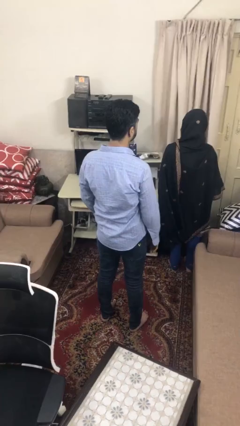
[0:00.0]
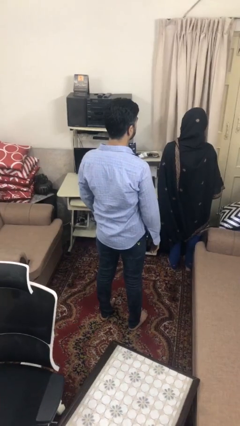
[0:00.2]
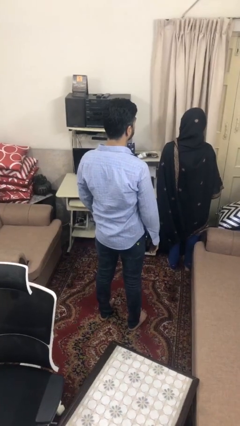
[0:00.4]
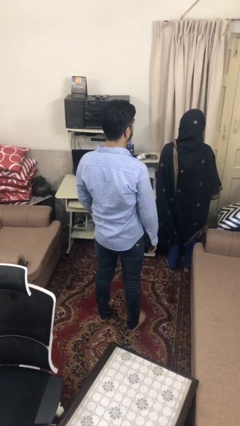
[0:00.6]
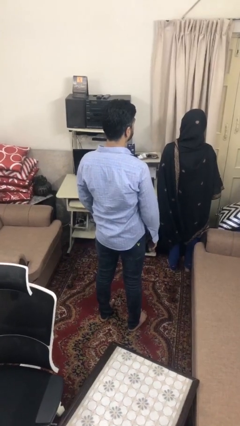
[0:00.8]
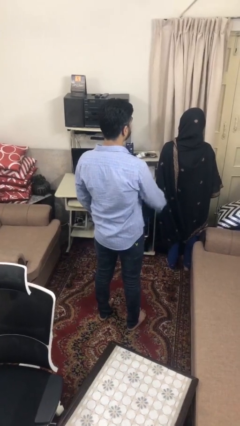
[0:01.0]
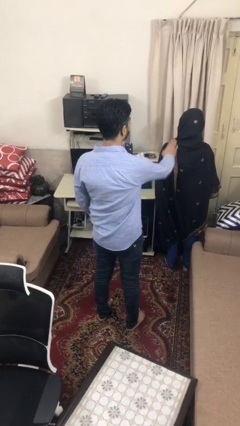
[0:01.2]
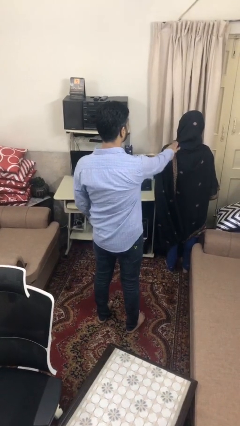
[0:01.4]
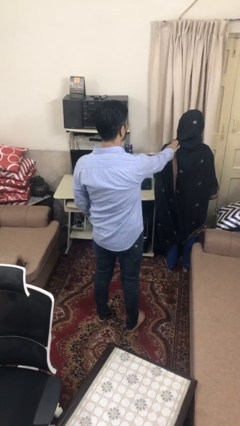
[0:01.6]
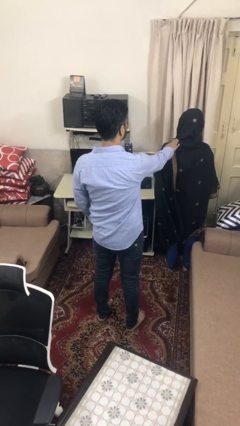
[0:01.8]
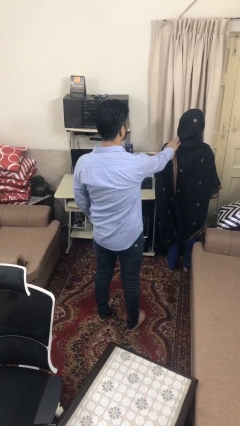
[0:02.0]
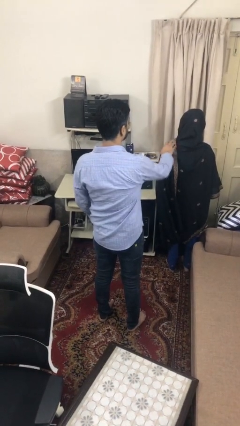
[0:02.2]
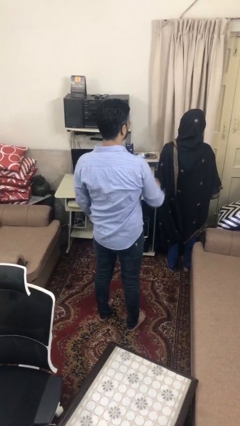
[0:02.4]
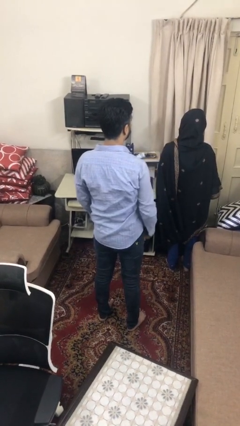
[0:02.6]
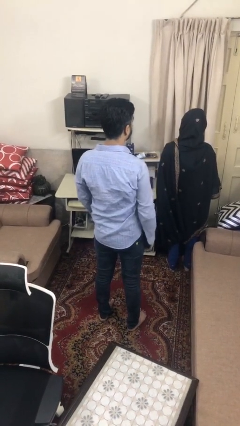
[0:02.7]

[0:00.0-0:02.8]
person touches back of person

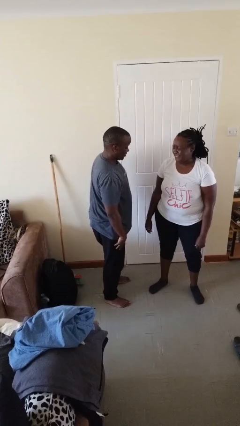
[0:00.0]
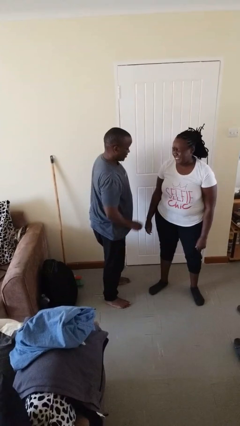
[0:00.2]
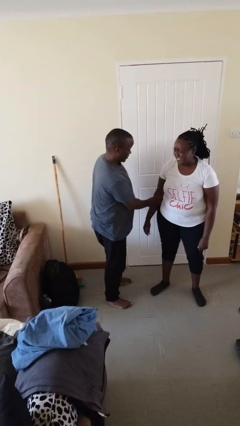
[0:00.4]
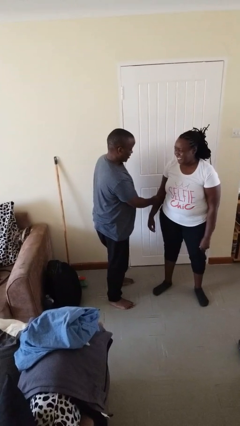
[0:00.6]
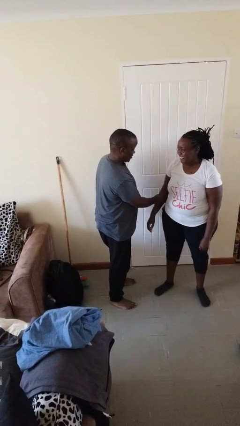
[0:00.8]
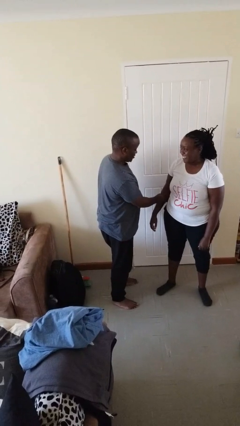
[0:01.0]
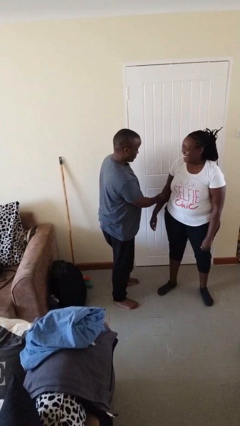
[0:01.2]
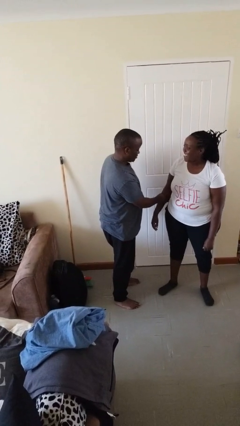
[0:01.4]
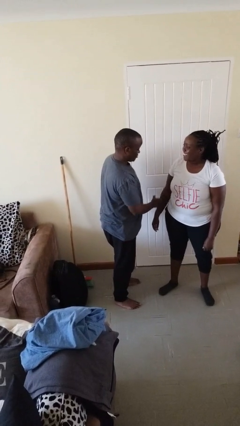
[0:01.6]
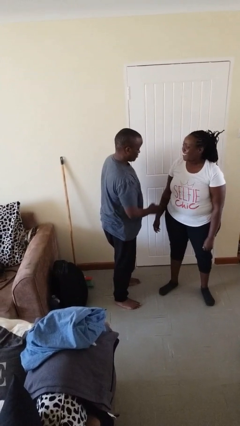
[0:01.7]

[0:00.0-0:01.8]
person grabs person by forearm

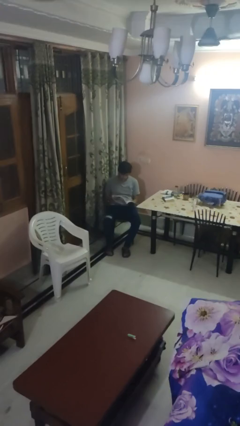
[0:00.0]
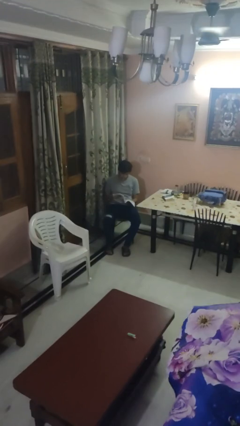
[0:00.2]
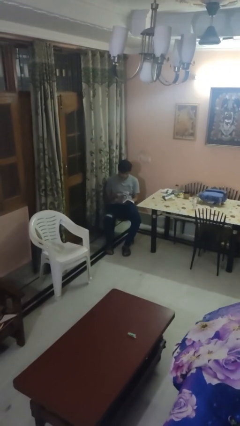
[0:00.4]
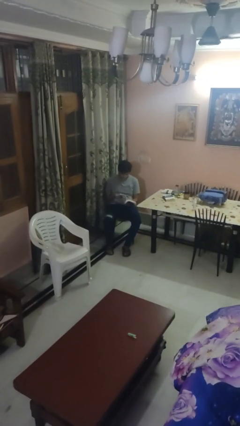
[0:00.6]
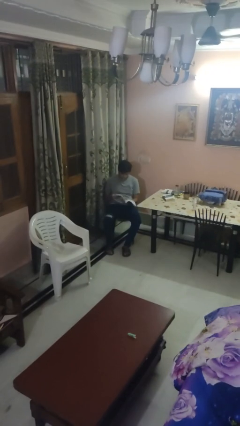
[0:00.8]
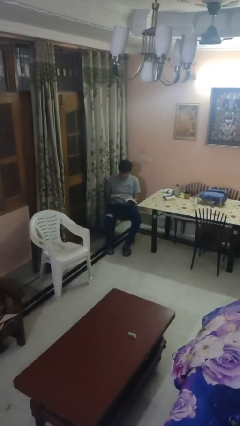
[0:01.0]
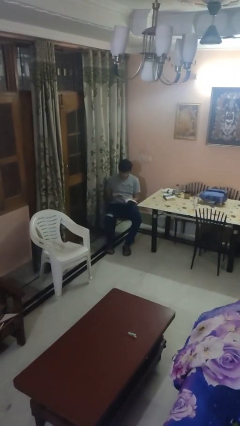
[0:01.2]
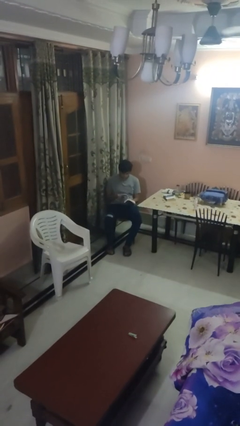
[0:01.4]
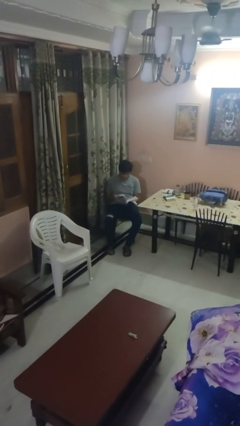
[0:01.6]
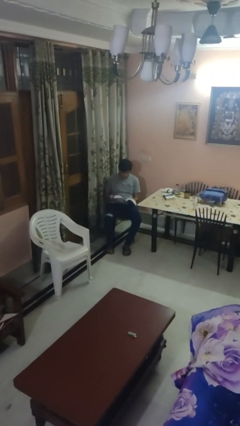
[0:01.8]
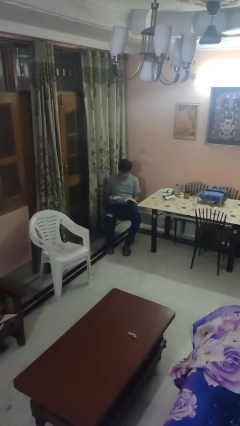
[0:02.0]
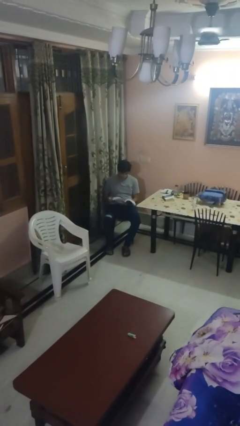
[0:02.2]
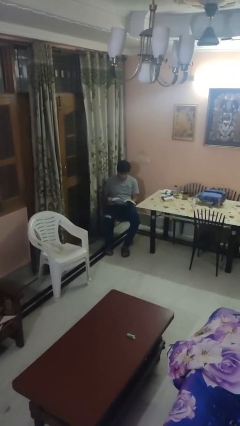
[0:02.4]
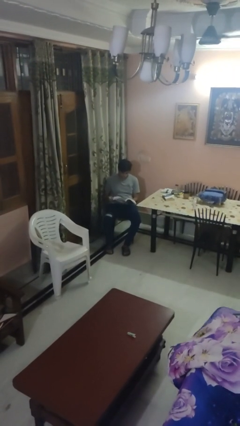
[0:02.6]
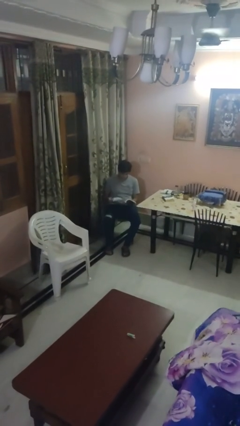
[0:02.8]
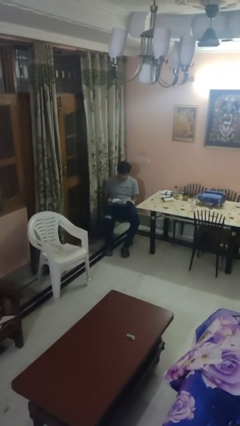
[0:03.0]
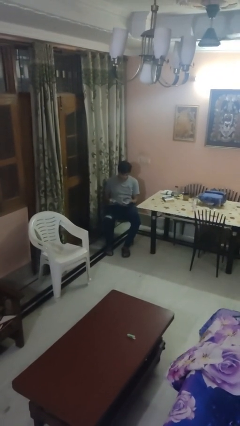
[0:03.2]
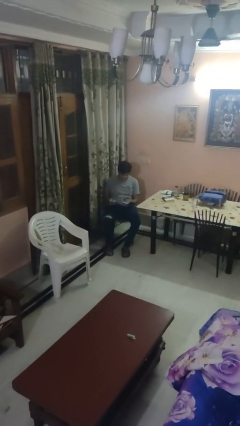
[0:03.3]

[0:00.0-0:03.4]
person reads magazine

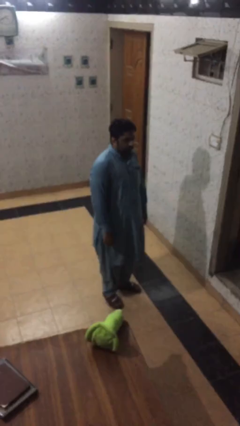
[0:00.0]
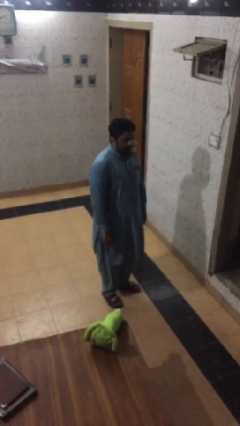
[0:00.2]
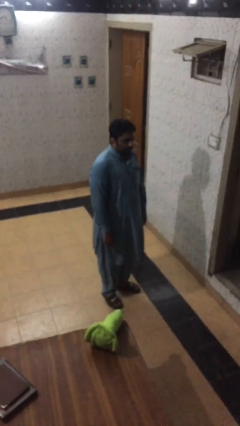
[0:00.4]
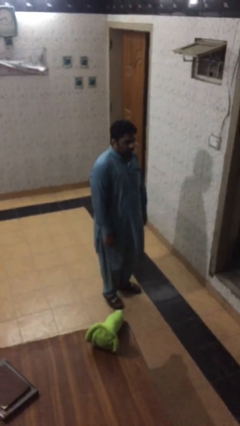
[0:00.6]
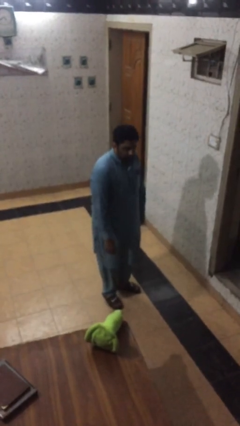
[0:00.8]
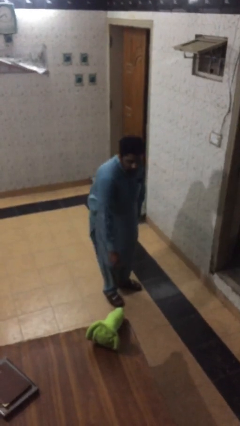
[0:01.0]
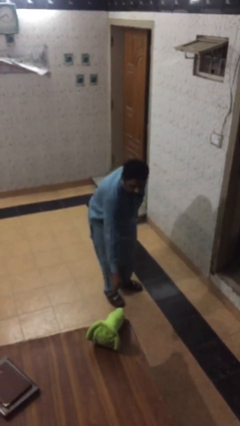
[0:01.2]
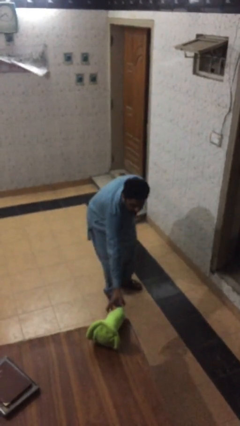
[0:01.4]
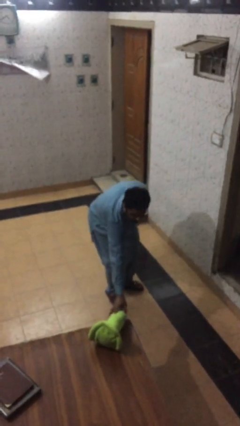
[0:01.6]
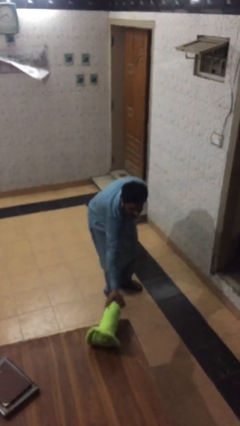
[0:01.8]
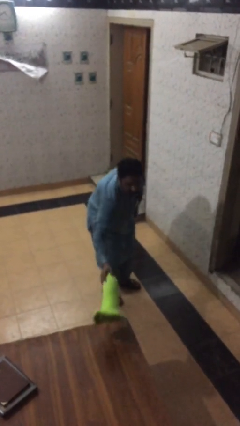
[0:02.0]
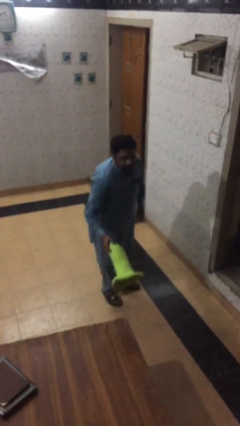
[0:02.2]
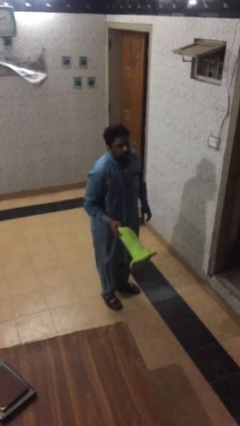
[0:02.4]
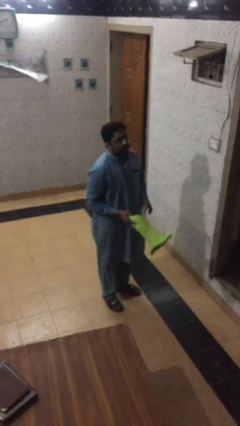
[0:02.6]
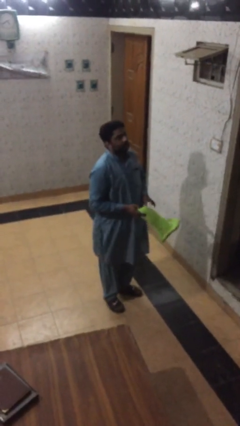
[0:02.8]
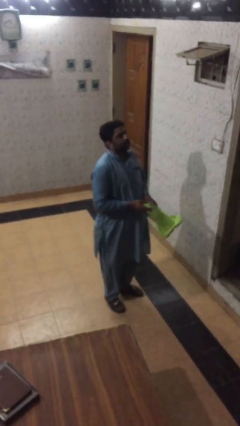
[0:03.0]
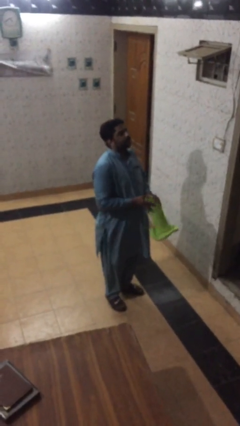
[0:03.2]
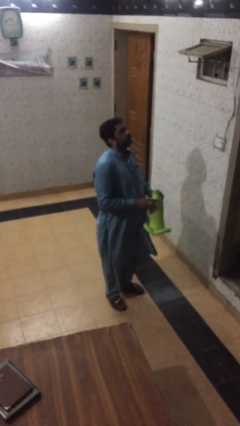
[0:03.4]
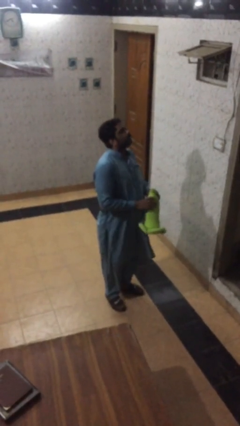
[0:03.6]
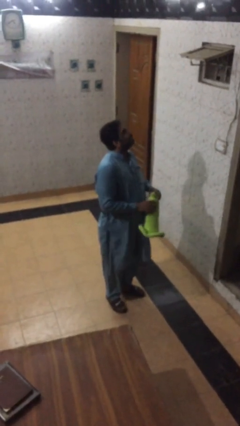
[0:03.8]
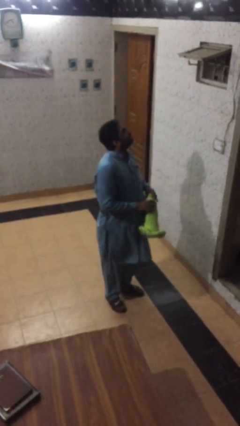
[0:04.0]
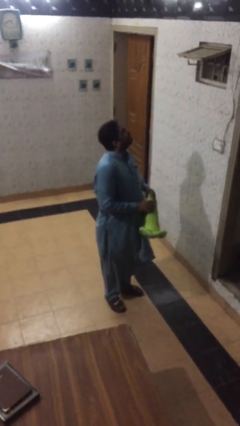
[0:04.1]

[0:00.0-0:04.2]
person picks up object from table

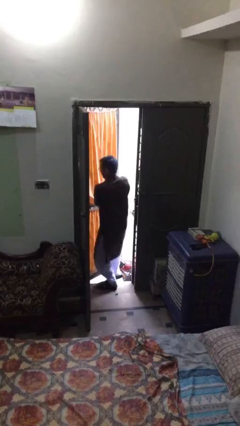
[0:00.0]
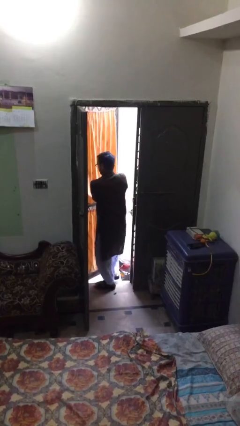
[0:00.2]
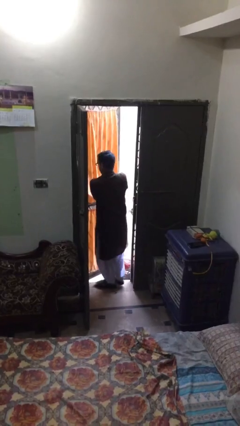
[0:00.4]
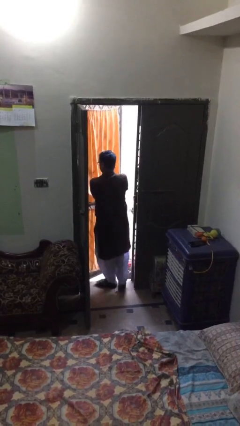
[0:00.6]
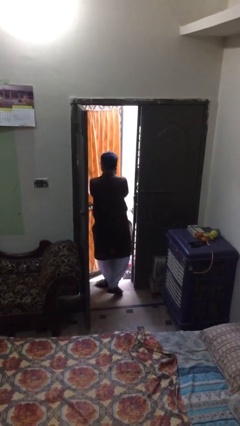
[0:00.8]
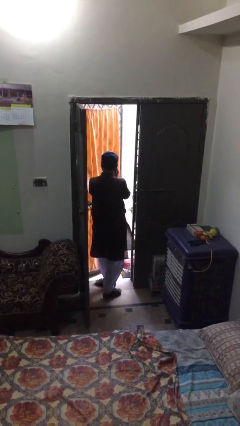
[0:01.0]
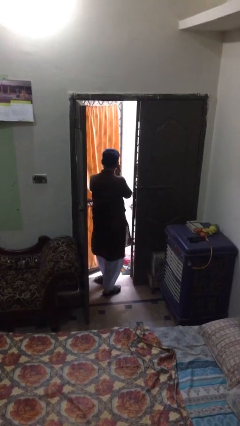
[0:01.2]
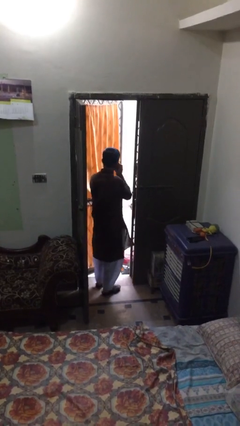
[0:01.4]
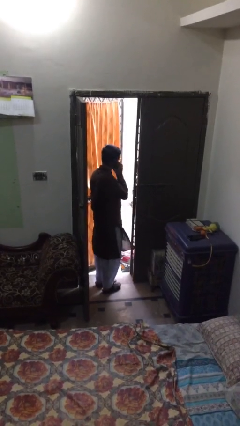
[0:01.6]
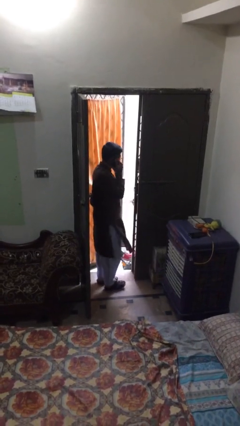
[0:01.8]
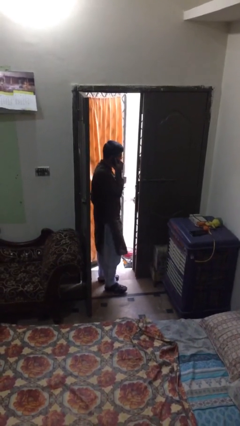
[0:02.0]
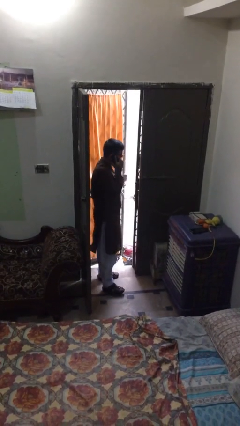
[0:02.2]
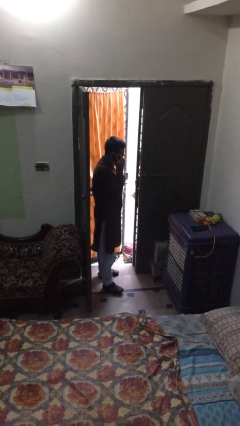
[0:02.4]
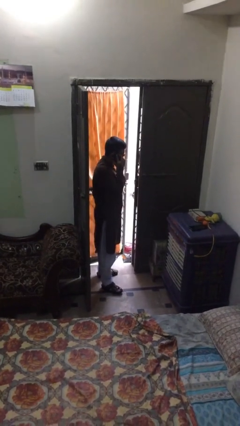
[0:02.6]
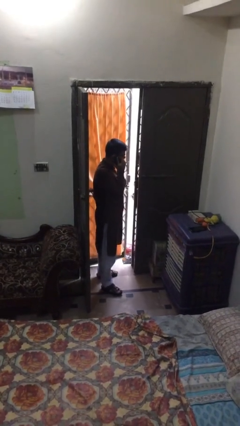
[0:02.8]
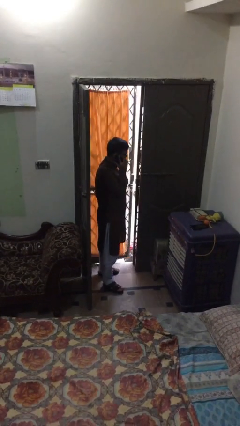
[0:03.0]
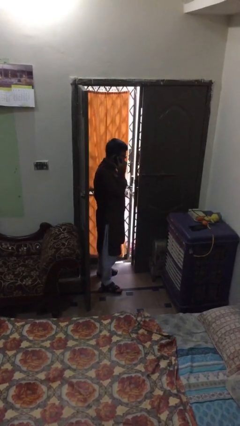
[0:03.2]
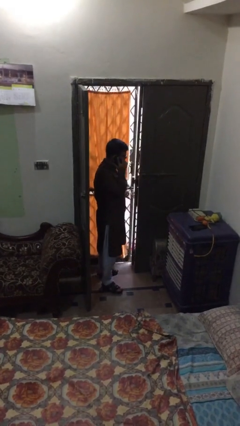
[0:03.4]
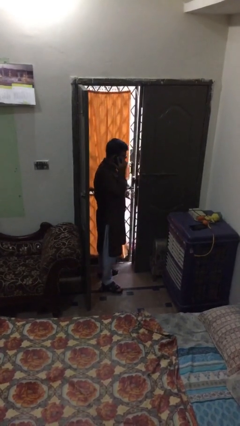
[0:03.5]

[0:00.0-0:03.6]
person enters scene through structure

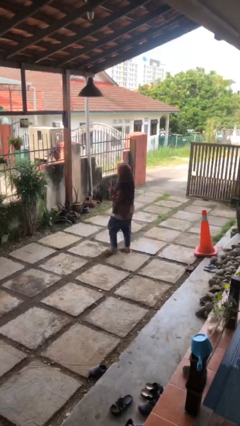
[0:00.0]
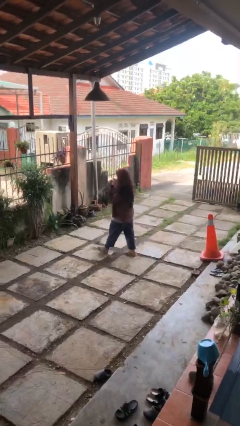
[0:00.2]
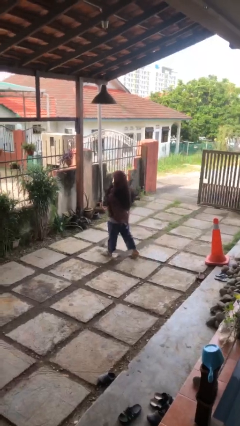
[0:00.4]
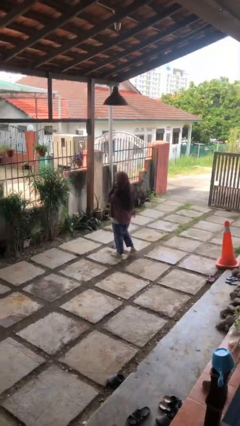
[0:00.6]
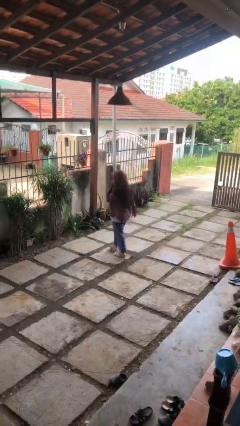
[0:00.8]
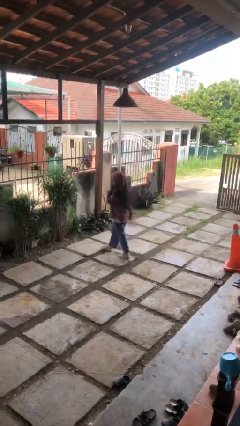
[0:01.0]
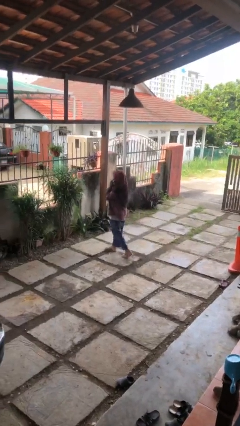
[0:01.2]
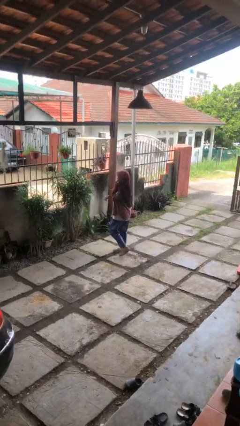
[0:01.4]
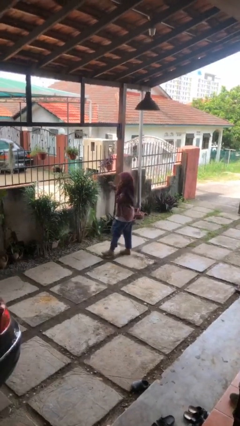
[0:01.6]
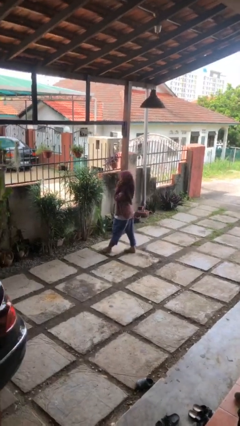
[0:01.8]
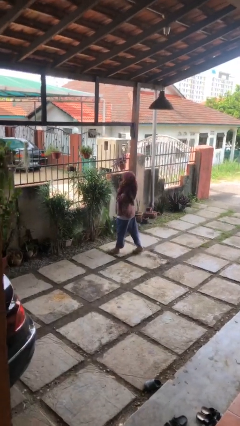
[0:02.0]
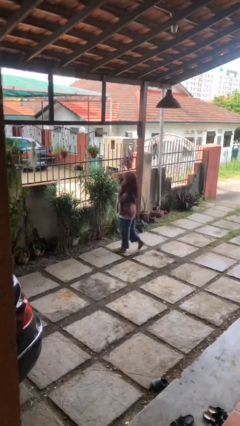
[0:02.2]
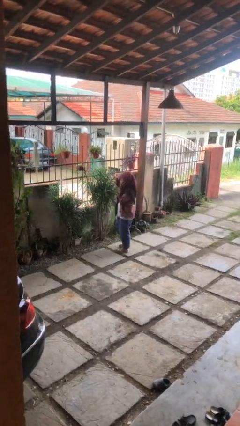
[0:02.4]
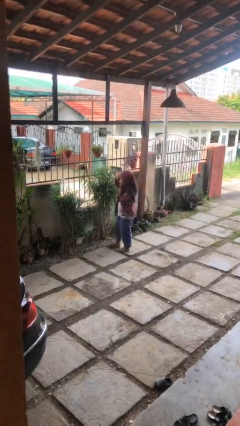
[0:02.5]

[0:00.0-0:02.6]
person talks on phone
